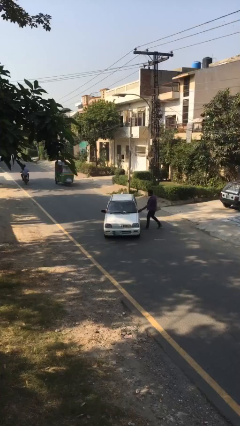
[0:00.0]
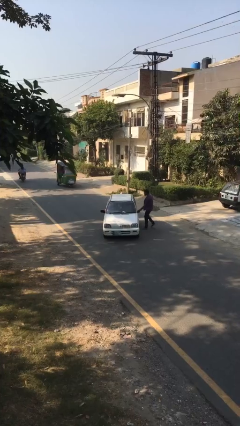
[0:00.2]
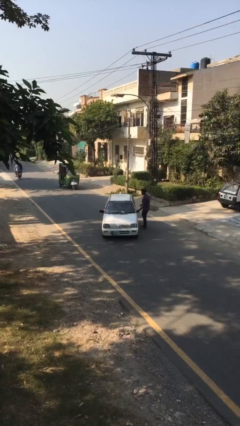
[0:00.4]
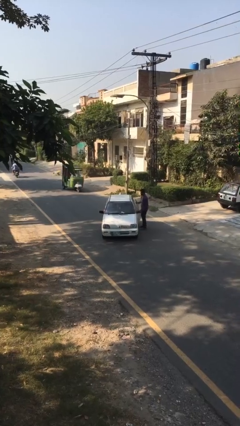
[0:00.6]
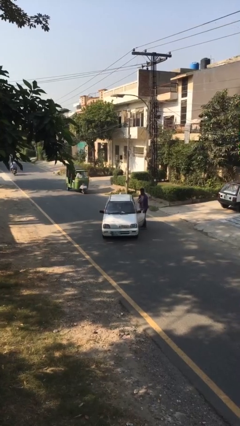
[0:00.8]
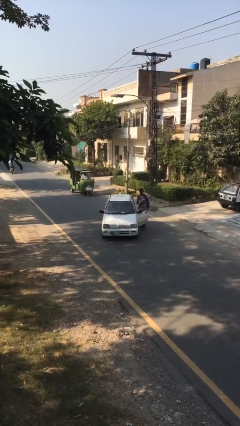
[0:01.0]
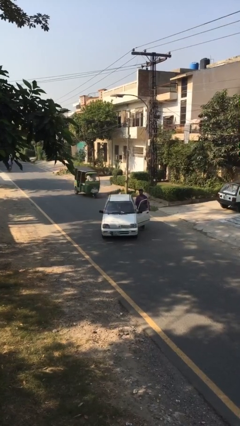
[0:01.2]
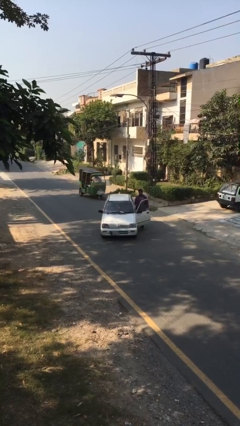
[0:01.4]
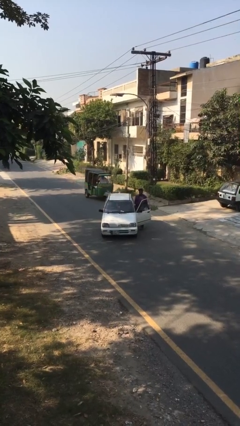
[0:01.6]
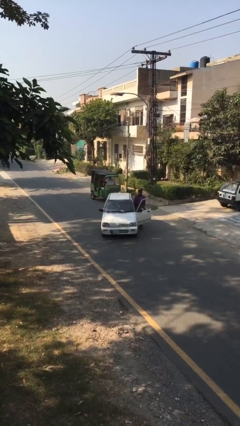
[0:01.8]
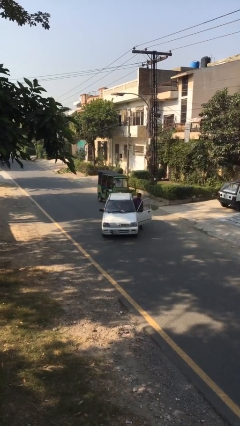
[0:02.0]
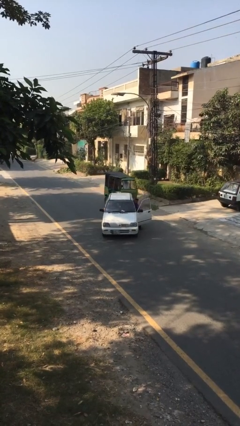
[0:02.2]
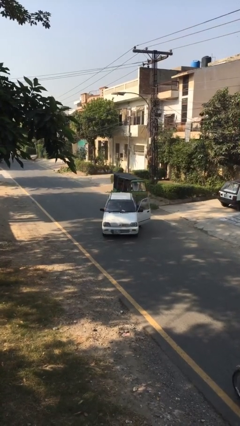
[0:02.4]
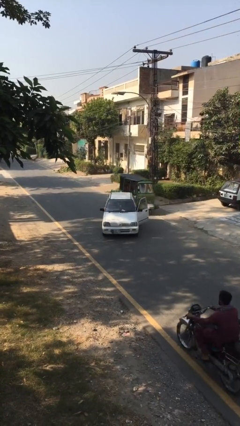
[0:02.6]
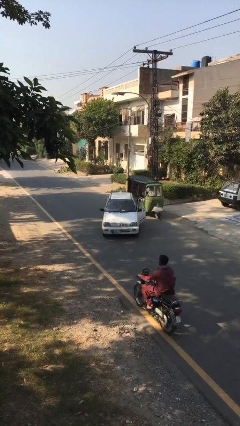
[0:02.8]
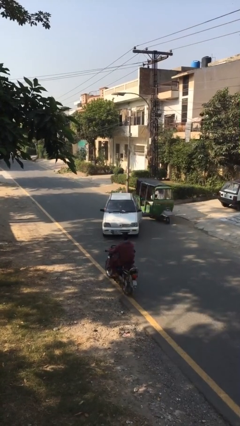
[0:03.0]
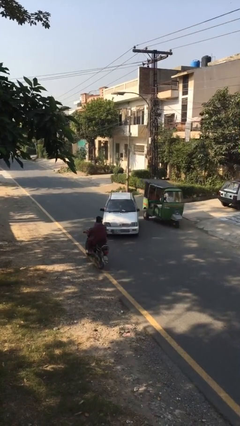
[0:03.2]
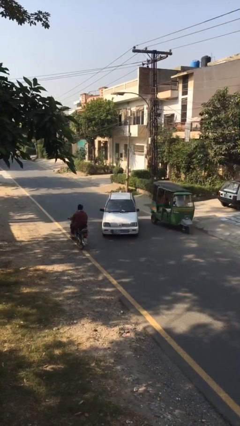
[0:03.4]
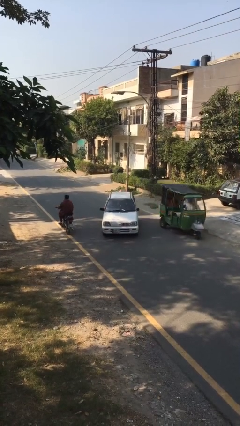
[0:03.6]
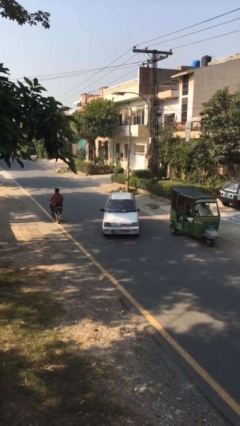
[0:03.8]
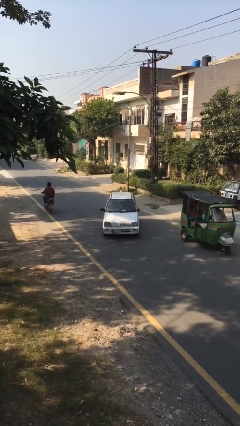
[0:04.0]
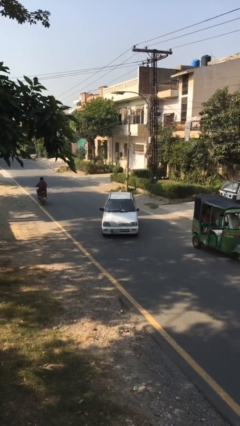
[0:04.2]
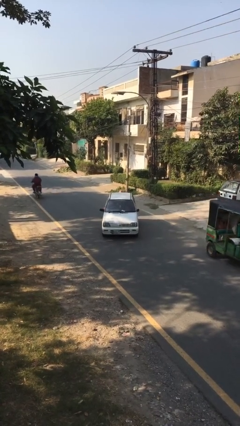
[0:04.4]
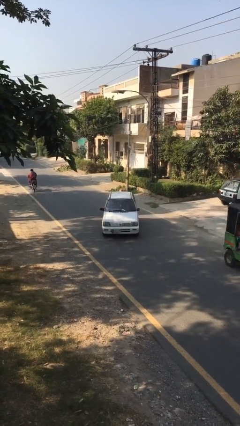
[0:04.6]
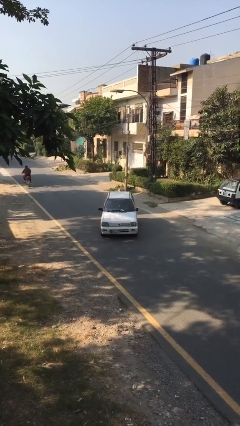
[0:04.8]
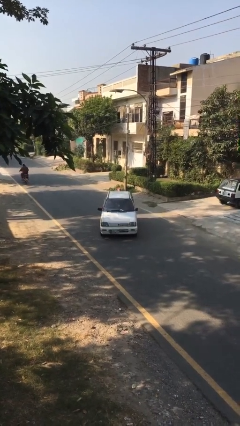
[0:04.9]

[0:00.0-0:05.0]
car picks up person

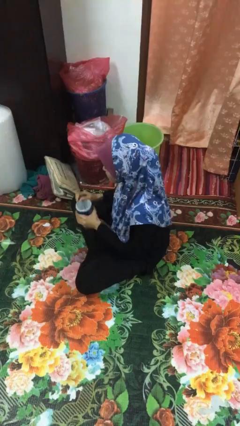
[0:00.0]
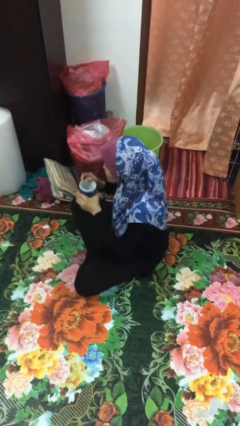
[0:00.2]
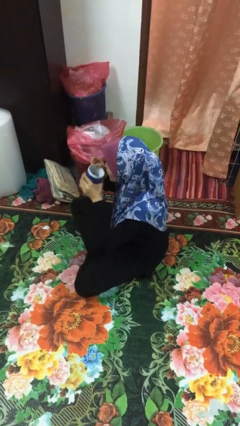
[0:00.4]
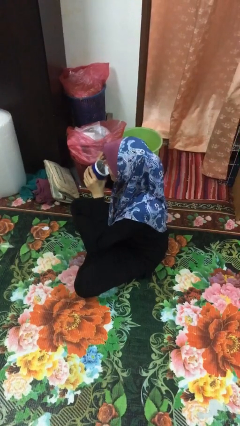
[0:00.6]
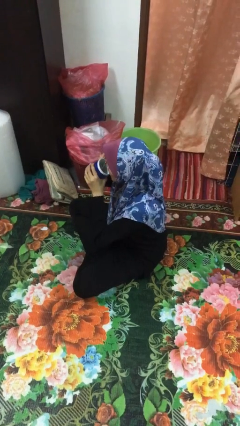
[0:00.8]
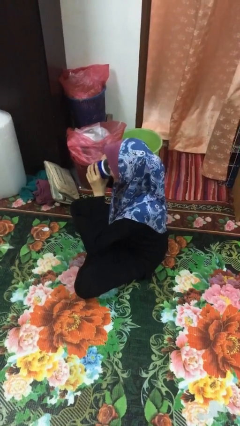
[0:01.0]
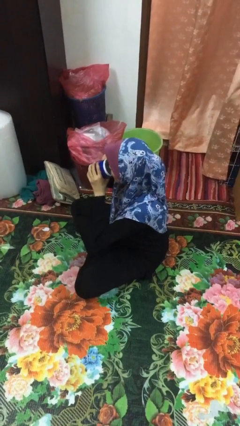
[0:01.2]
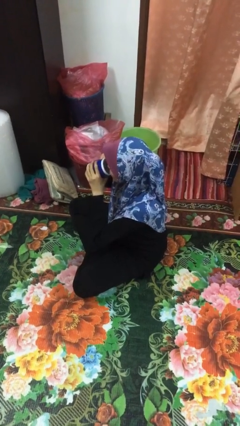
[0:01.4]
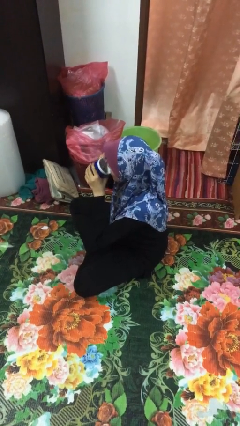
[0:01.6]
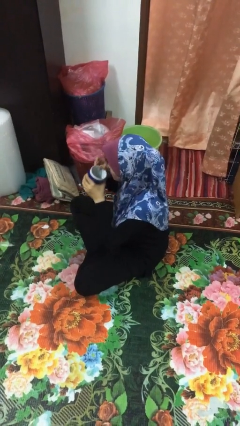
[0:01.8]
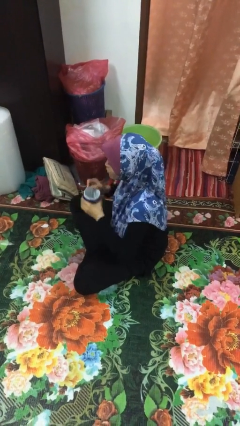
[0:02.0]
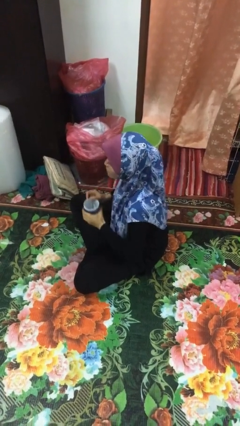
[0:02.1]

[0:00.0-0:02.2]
person drinks from mug

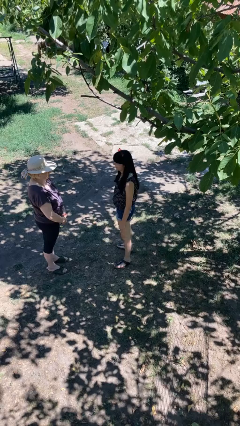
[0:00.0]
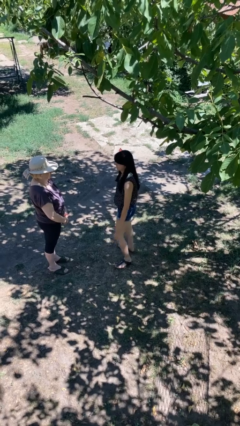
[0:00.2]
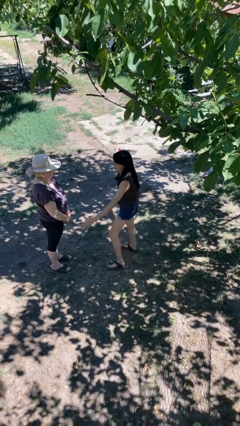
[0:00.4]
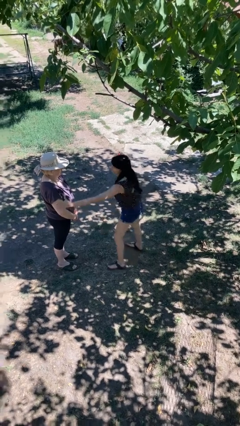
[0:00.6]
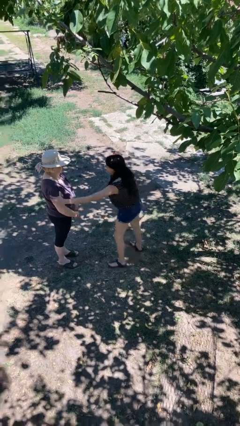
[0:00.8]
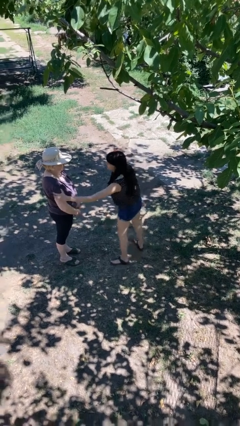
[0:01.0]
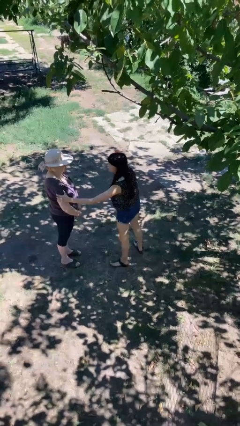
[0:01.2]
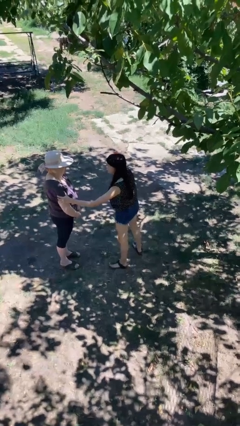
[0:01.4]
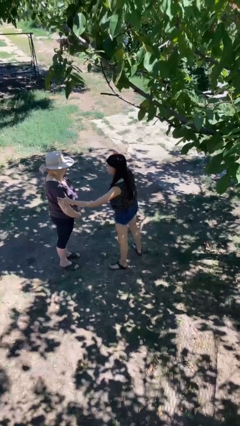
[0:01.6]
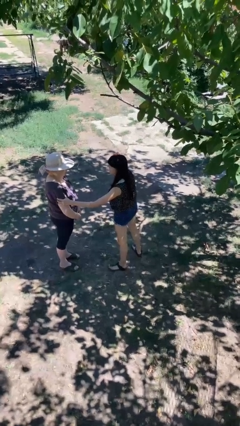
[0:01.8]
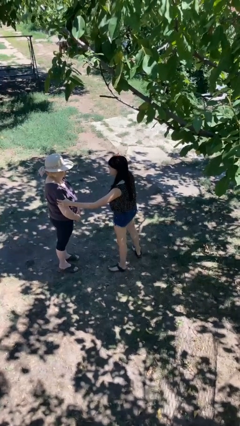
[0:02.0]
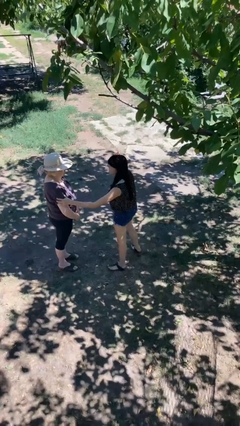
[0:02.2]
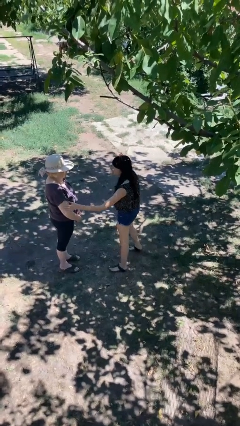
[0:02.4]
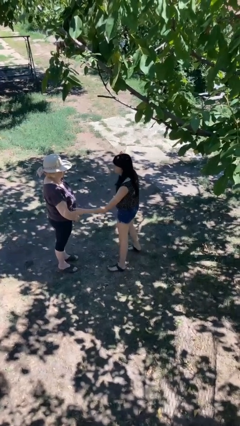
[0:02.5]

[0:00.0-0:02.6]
person grabs person by bicep

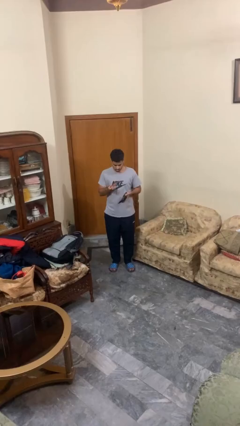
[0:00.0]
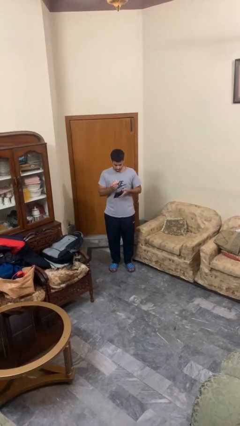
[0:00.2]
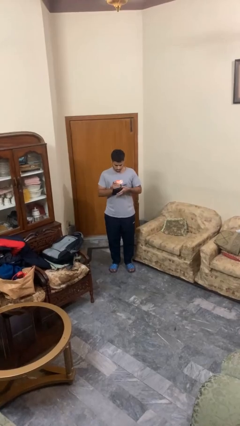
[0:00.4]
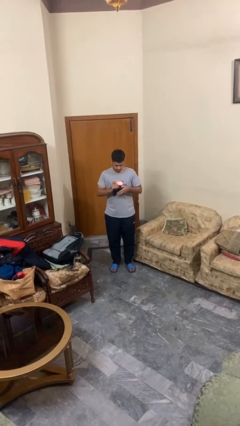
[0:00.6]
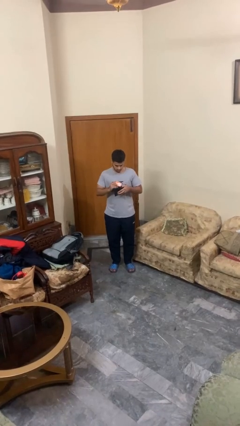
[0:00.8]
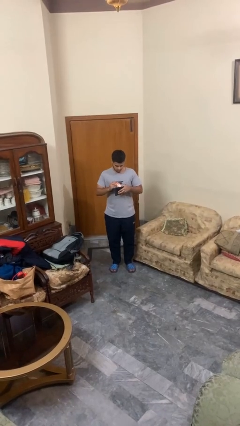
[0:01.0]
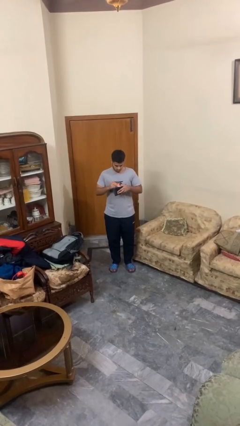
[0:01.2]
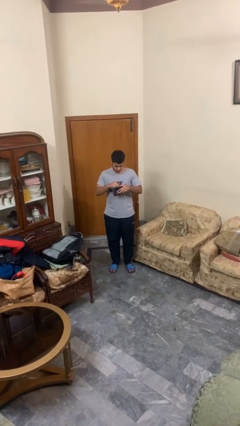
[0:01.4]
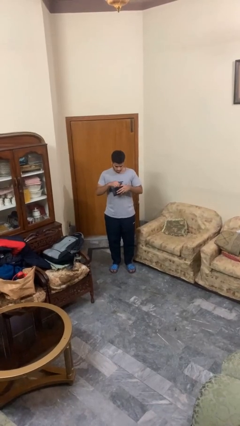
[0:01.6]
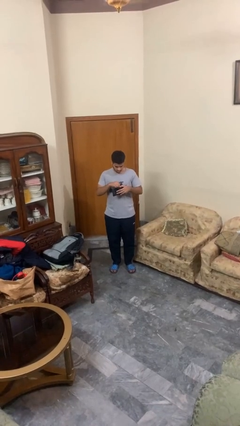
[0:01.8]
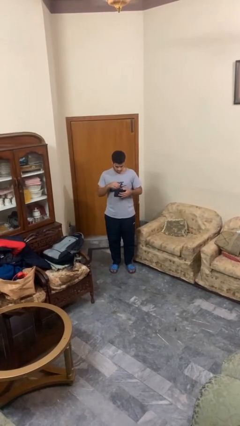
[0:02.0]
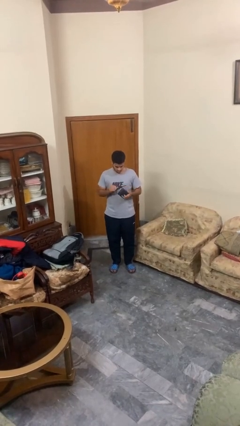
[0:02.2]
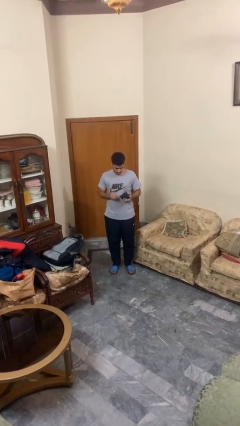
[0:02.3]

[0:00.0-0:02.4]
person puts object into purse

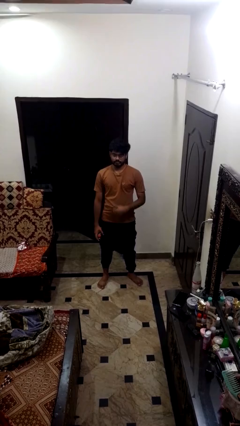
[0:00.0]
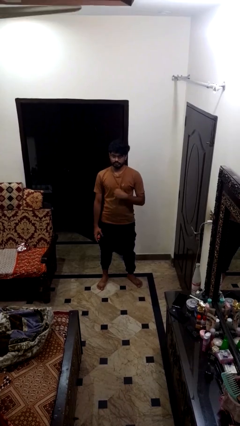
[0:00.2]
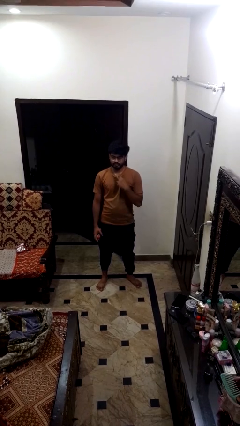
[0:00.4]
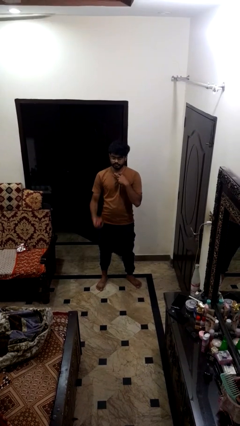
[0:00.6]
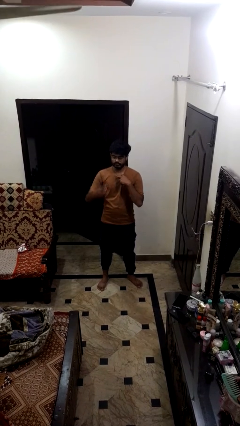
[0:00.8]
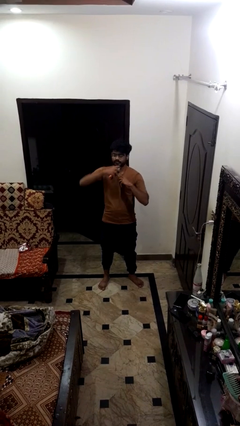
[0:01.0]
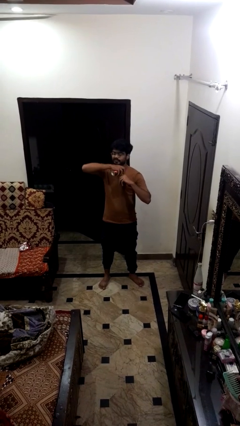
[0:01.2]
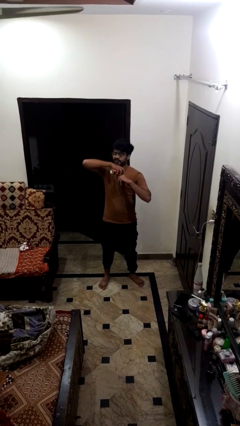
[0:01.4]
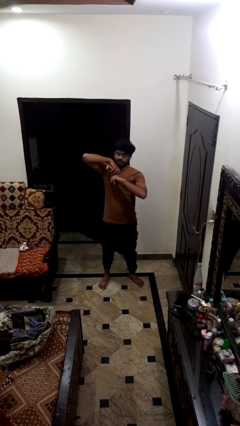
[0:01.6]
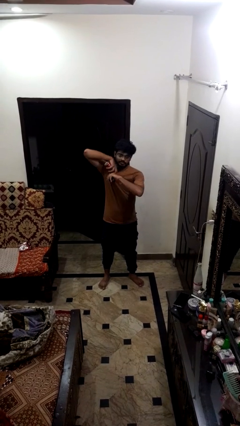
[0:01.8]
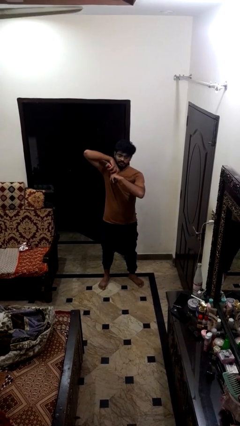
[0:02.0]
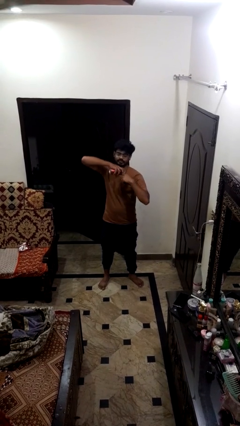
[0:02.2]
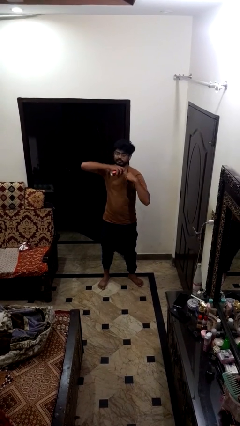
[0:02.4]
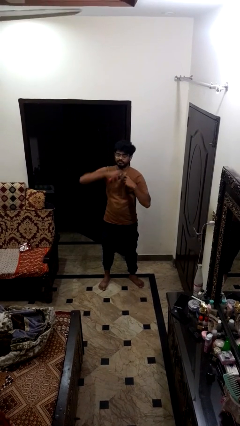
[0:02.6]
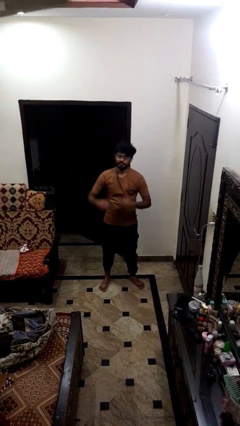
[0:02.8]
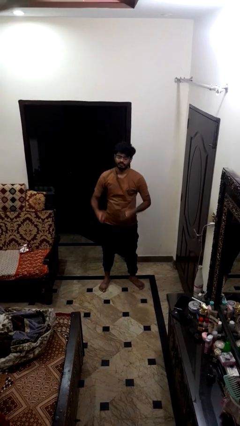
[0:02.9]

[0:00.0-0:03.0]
person applies deodorant

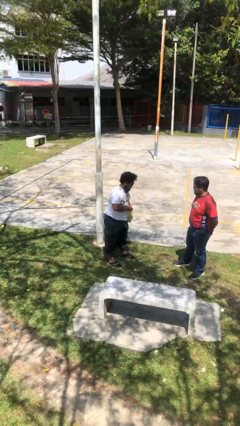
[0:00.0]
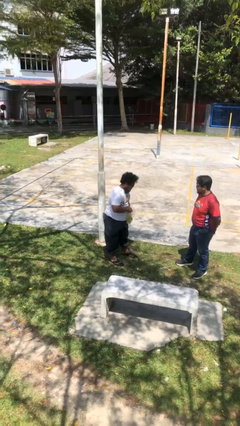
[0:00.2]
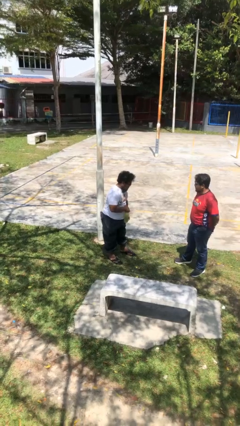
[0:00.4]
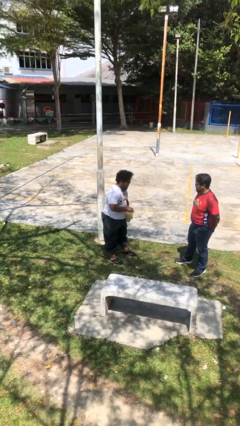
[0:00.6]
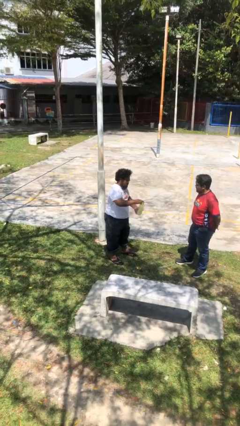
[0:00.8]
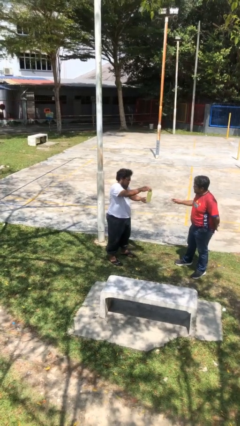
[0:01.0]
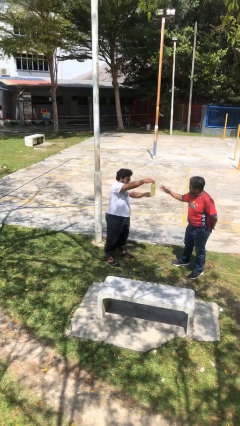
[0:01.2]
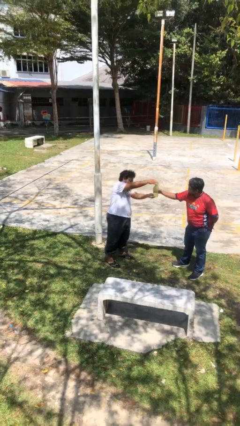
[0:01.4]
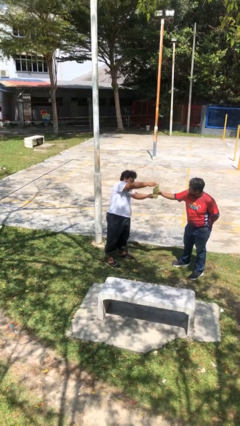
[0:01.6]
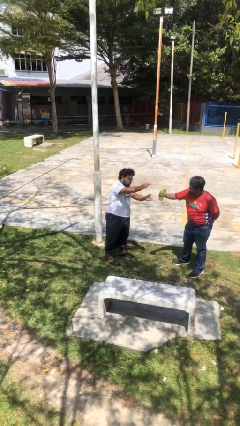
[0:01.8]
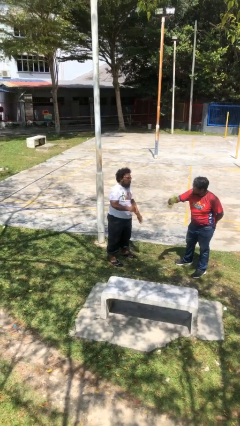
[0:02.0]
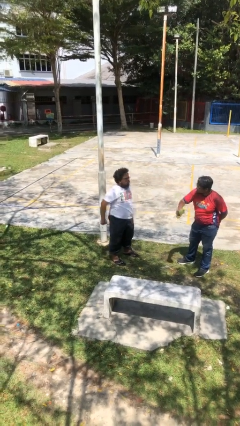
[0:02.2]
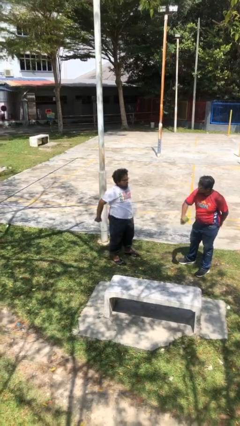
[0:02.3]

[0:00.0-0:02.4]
person transfers object to person

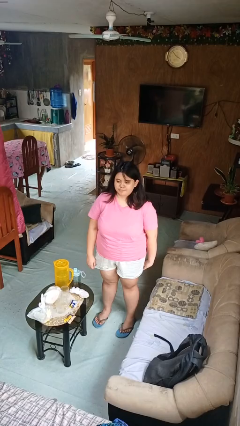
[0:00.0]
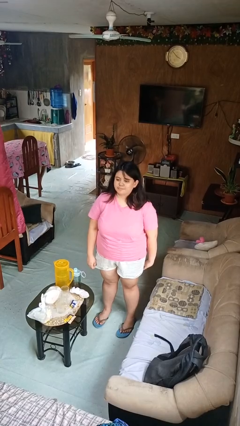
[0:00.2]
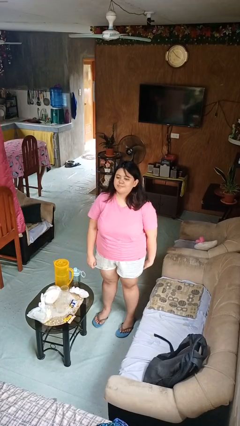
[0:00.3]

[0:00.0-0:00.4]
person nods head
